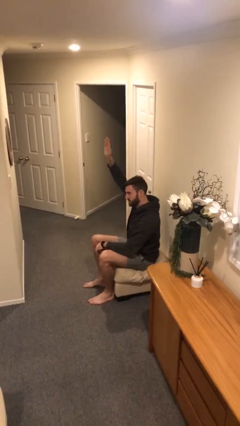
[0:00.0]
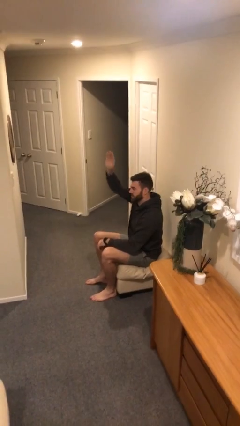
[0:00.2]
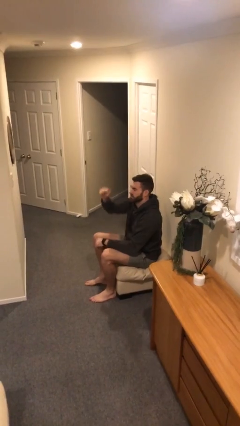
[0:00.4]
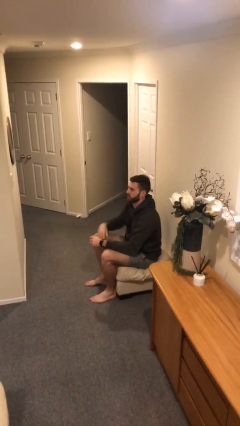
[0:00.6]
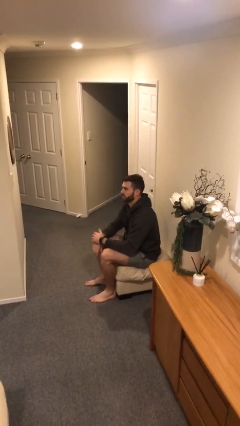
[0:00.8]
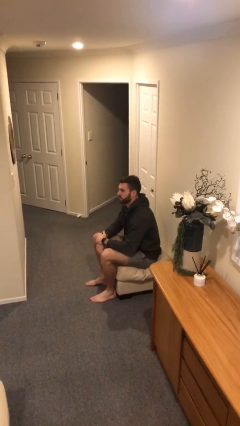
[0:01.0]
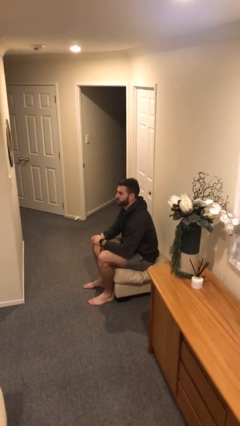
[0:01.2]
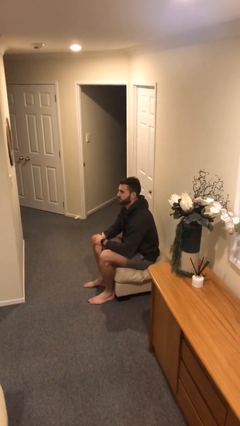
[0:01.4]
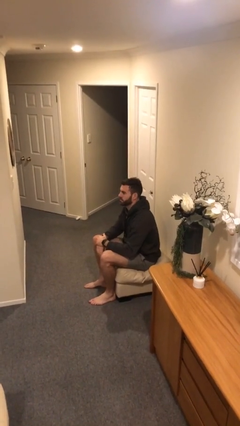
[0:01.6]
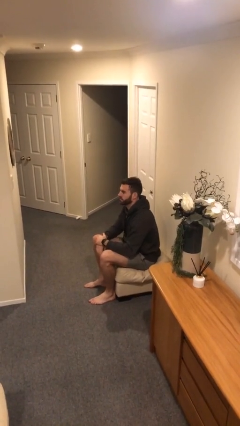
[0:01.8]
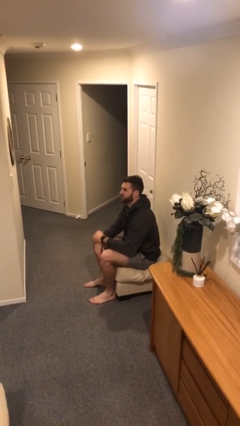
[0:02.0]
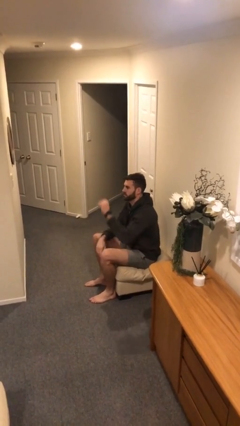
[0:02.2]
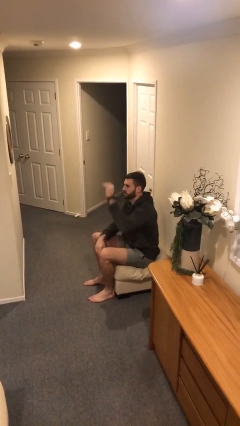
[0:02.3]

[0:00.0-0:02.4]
person gestures lower hand

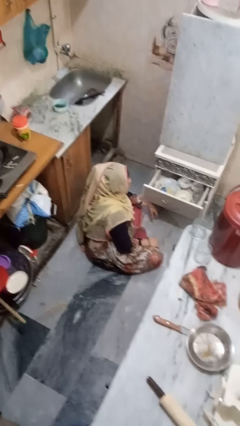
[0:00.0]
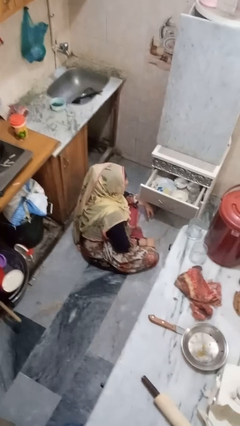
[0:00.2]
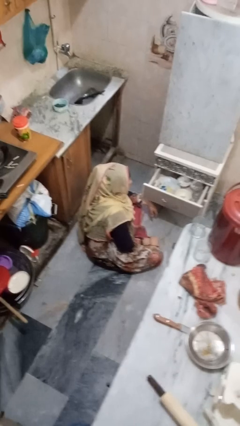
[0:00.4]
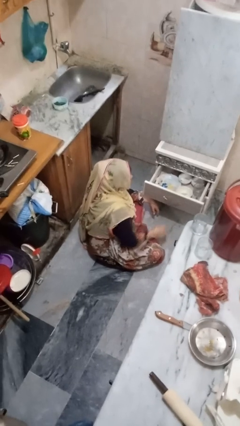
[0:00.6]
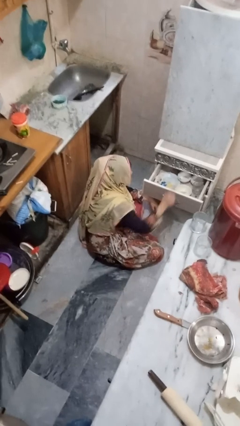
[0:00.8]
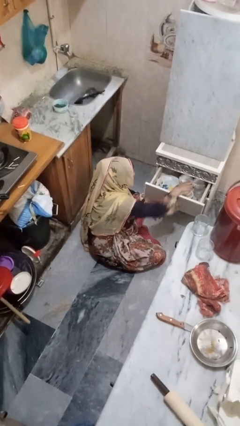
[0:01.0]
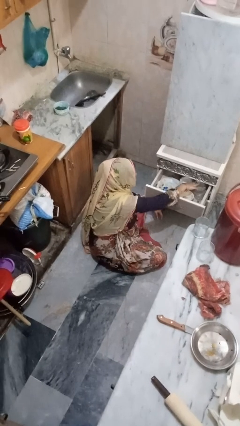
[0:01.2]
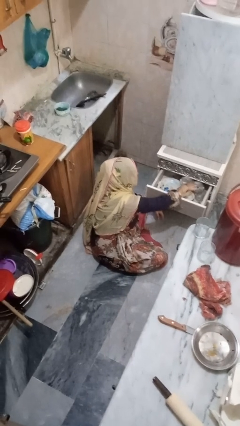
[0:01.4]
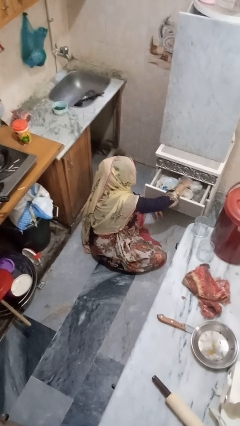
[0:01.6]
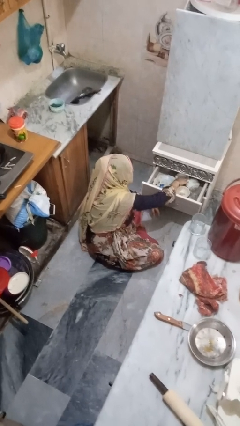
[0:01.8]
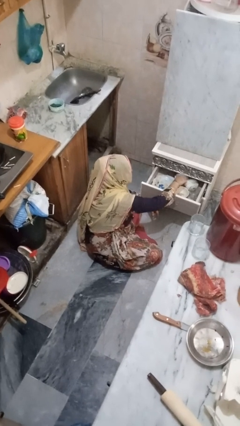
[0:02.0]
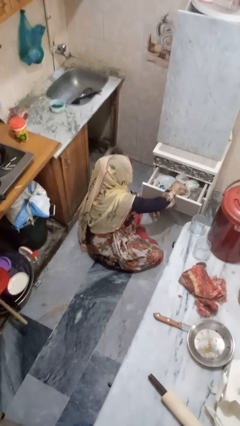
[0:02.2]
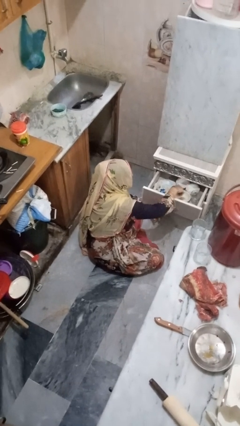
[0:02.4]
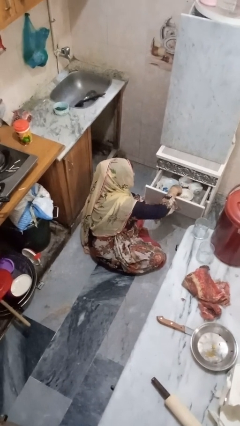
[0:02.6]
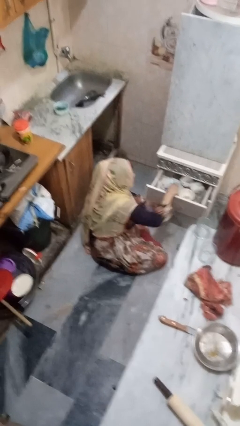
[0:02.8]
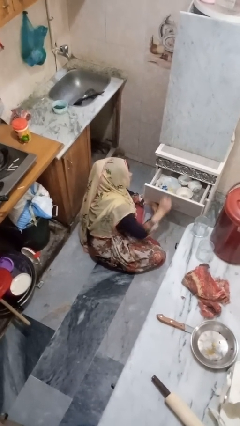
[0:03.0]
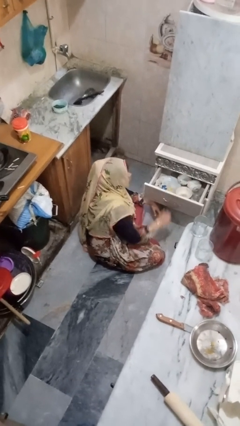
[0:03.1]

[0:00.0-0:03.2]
person searches in kitchen drawer

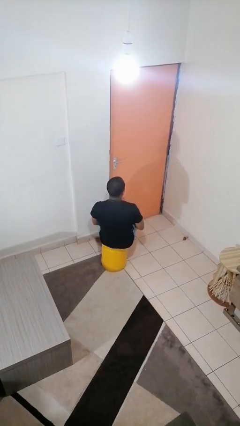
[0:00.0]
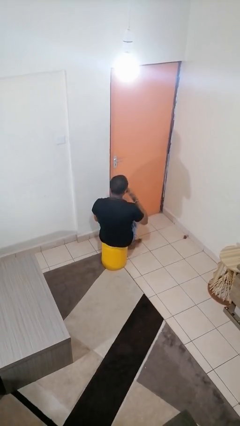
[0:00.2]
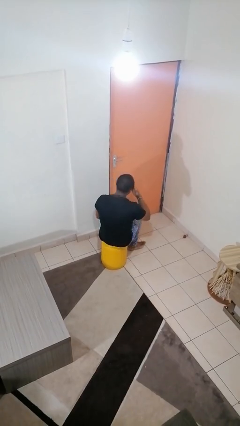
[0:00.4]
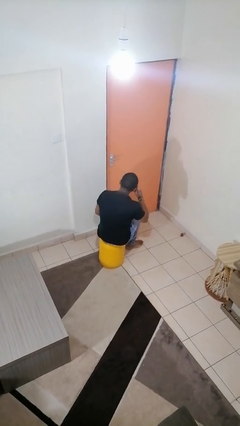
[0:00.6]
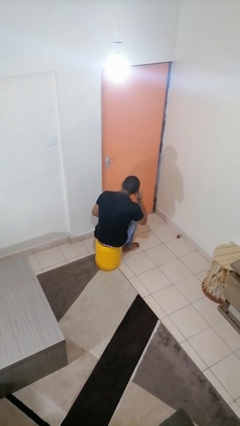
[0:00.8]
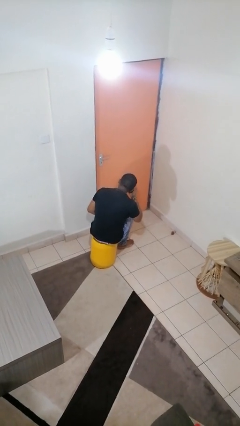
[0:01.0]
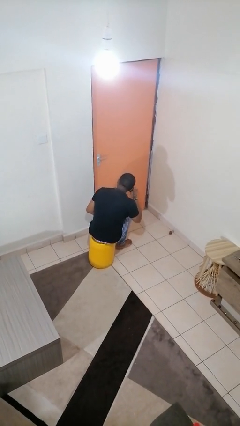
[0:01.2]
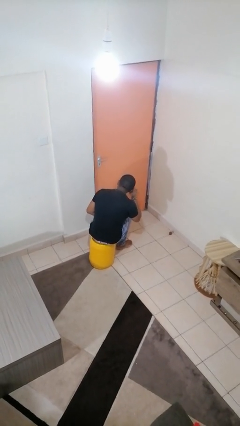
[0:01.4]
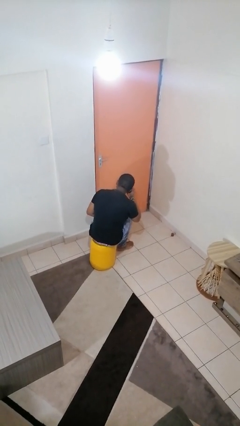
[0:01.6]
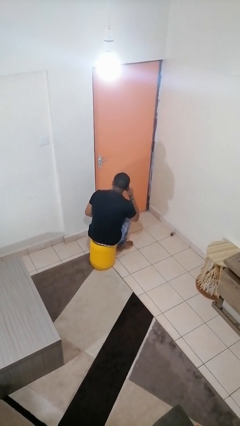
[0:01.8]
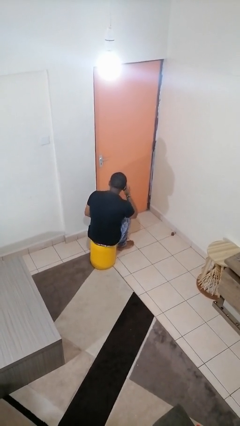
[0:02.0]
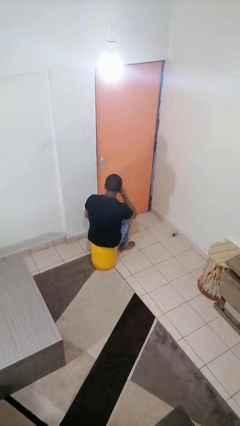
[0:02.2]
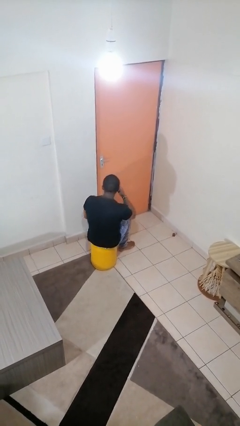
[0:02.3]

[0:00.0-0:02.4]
person rubs eyes

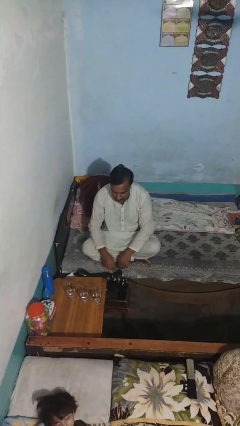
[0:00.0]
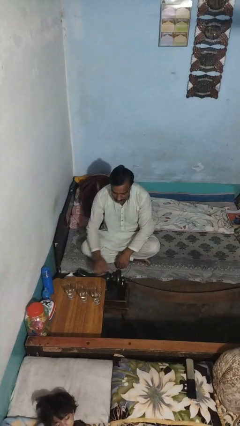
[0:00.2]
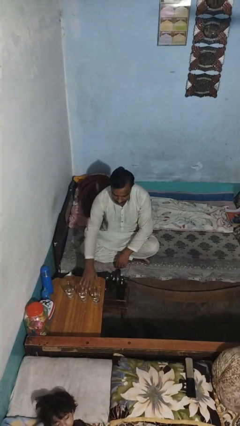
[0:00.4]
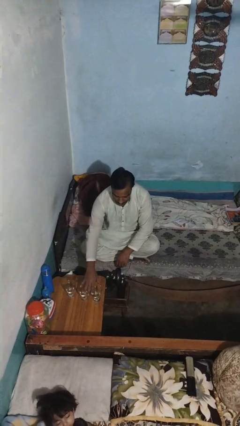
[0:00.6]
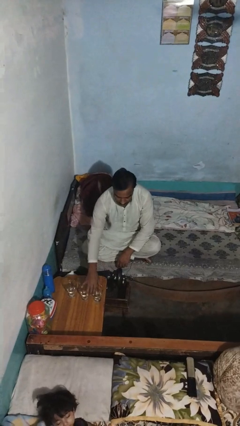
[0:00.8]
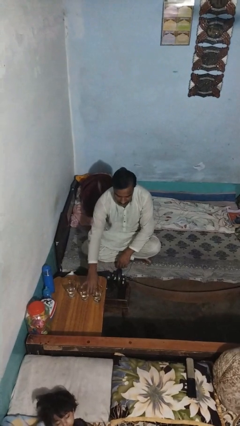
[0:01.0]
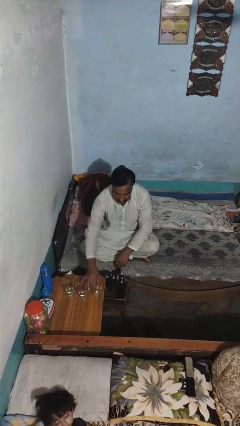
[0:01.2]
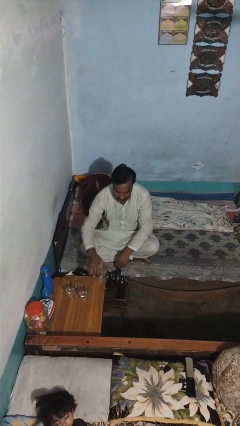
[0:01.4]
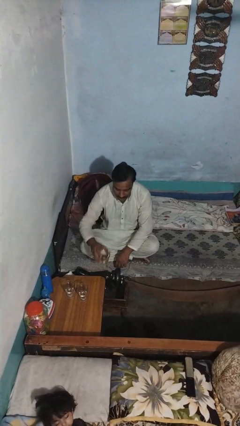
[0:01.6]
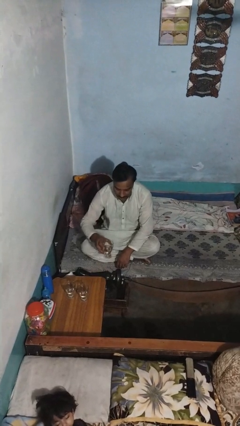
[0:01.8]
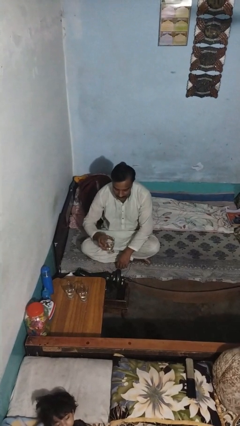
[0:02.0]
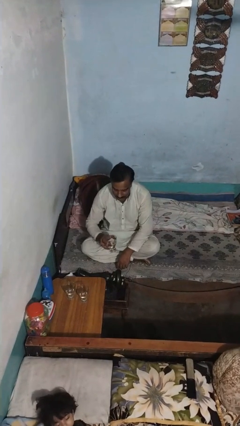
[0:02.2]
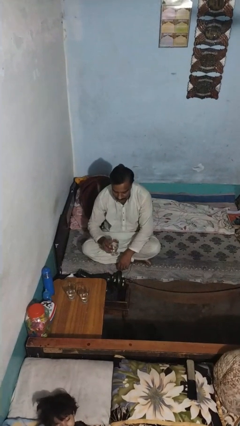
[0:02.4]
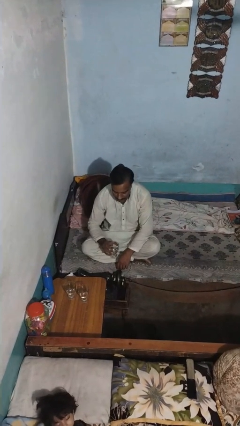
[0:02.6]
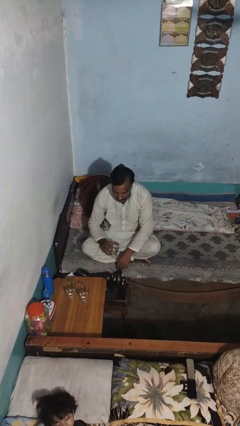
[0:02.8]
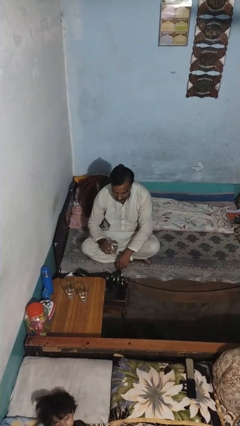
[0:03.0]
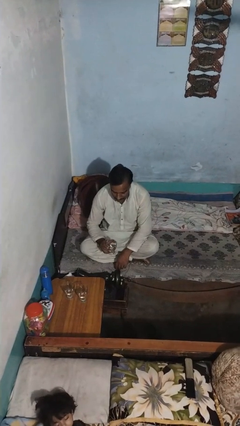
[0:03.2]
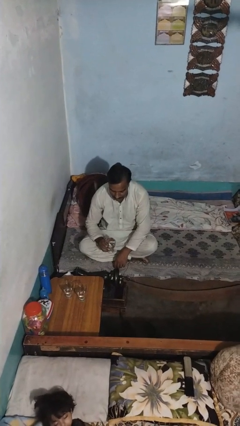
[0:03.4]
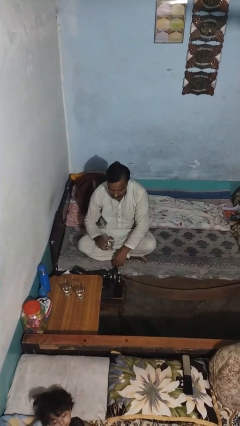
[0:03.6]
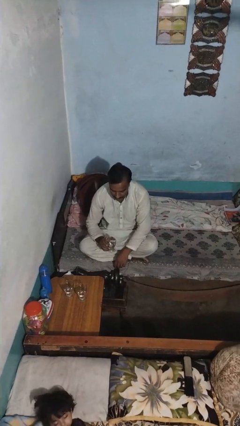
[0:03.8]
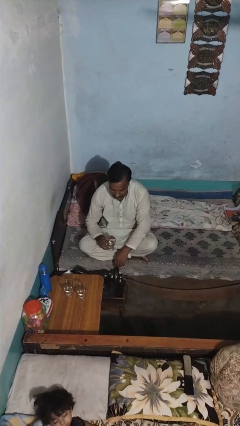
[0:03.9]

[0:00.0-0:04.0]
person picks up object from table

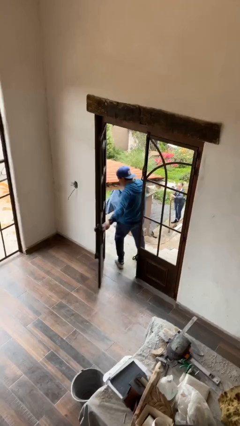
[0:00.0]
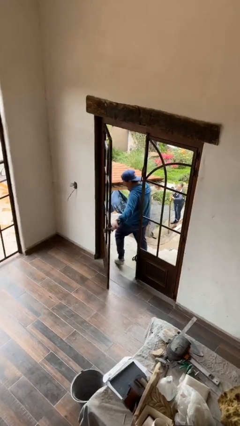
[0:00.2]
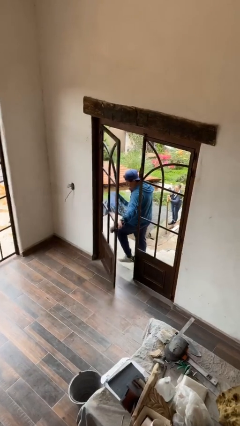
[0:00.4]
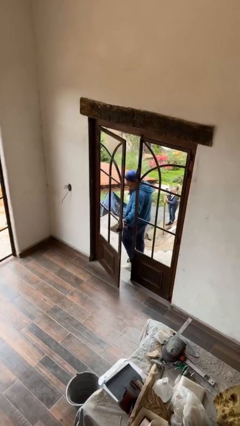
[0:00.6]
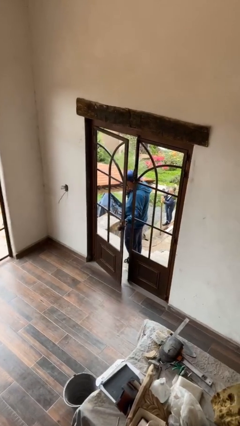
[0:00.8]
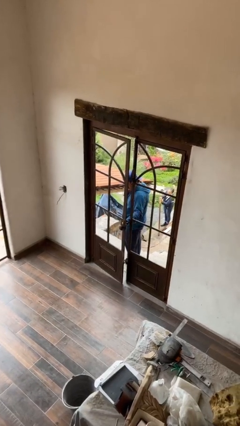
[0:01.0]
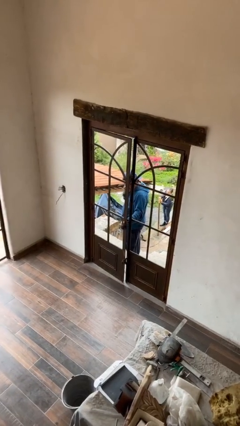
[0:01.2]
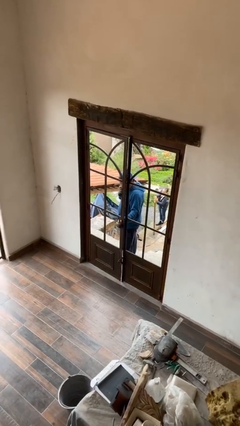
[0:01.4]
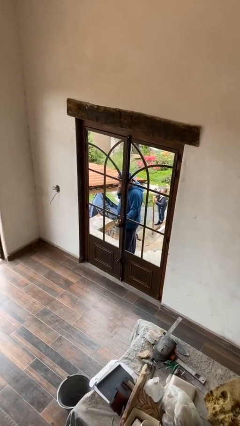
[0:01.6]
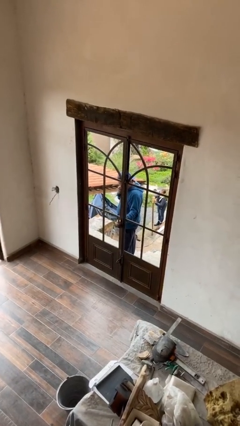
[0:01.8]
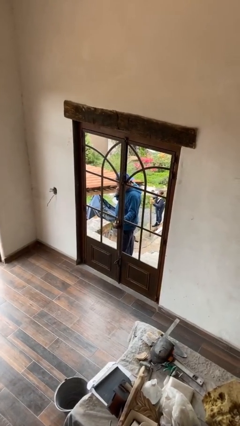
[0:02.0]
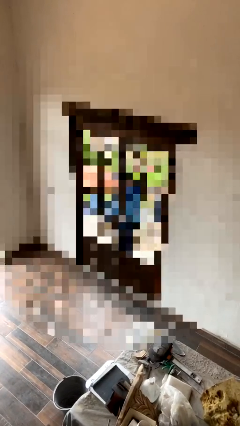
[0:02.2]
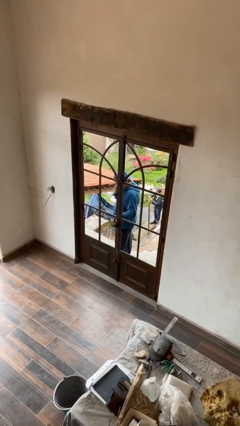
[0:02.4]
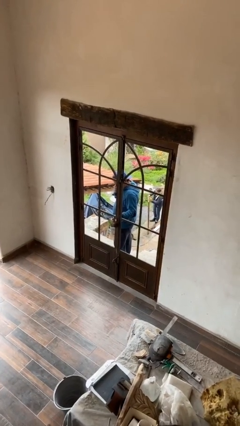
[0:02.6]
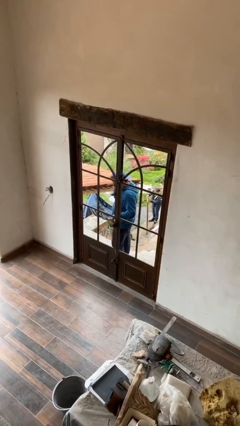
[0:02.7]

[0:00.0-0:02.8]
person closes facility door

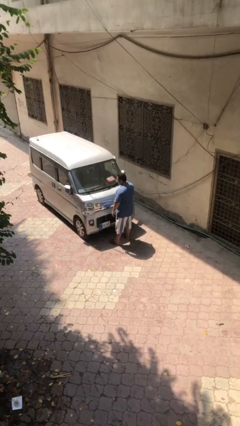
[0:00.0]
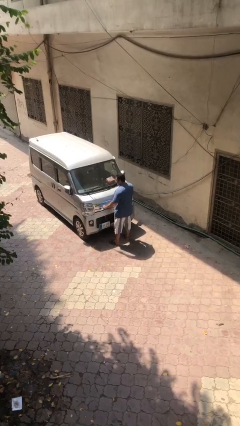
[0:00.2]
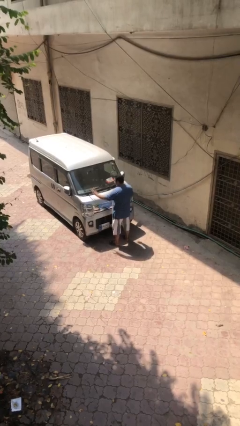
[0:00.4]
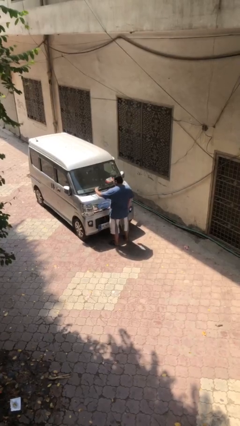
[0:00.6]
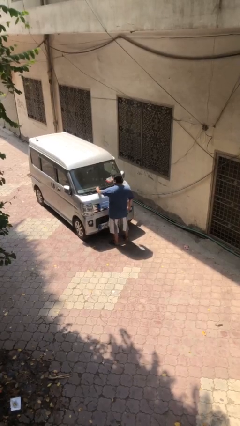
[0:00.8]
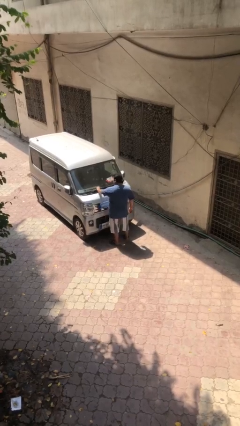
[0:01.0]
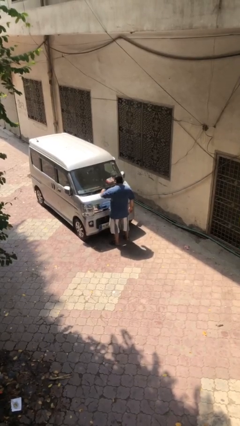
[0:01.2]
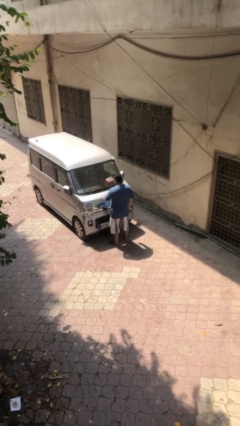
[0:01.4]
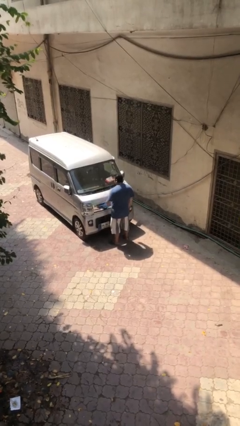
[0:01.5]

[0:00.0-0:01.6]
person flips down car wipers

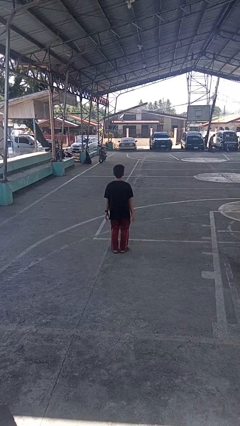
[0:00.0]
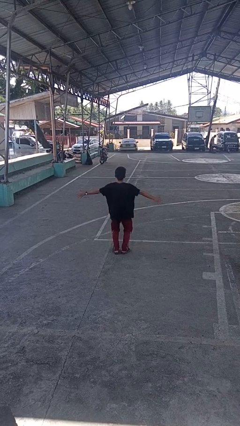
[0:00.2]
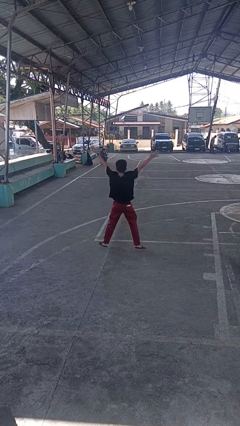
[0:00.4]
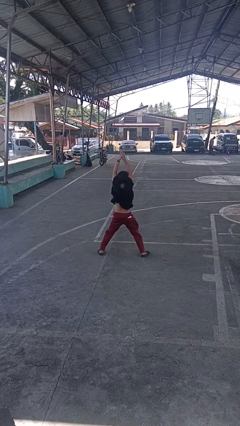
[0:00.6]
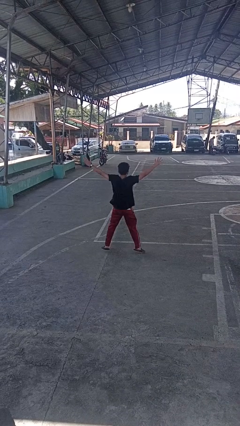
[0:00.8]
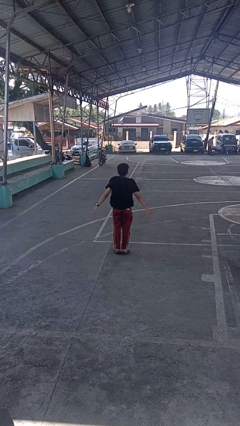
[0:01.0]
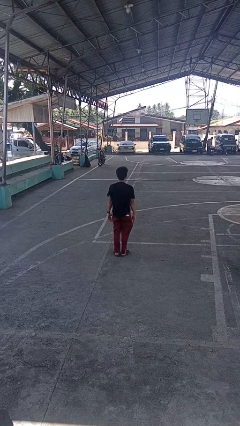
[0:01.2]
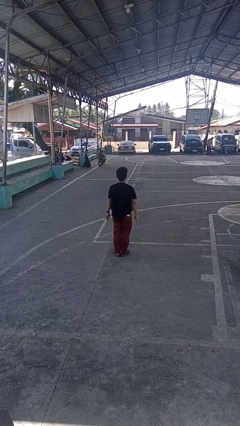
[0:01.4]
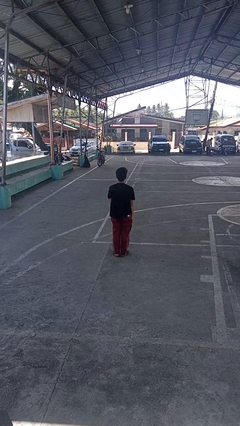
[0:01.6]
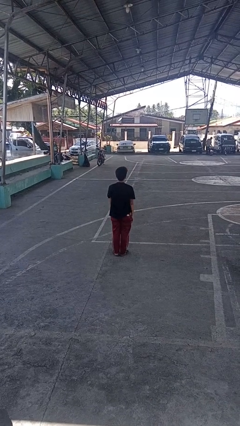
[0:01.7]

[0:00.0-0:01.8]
person exercises with jumping jacks
